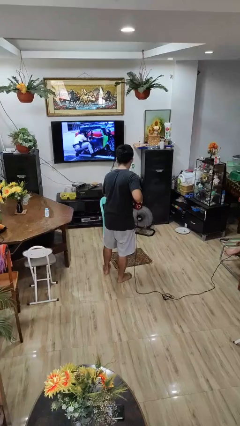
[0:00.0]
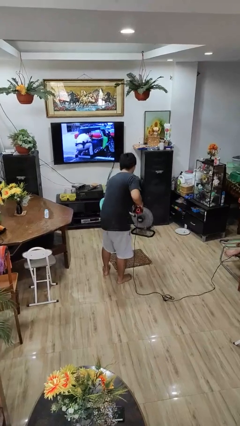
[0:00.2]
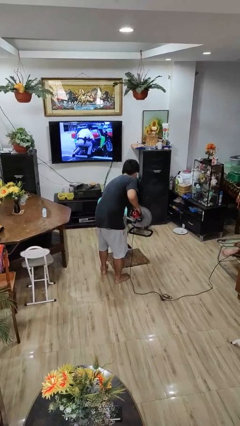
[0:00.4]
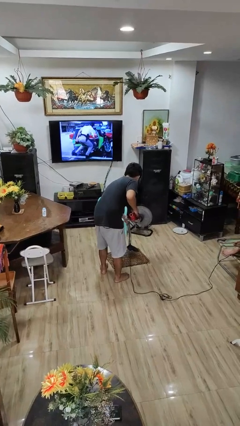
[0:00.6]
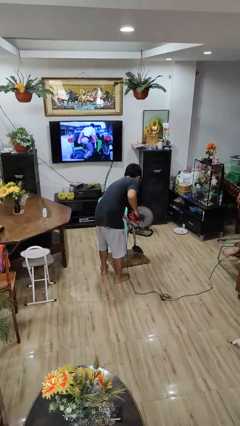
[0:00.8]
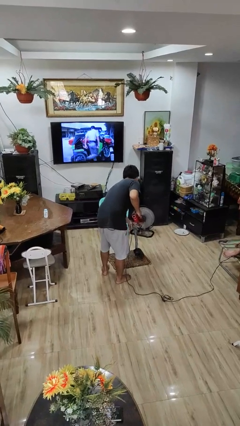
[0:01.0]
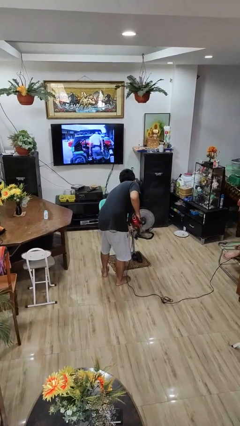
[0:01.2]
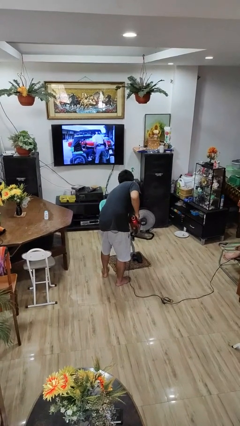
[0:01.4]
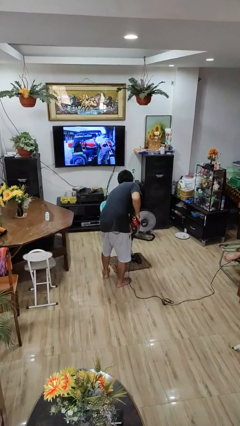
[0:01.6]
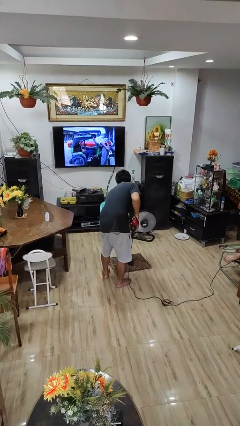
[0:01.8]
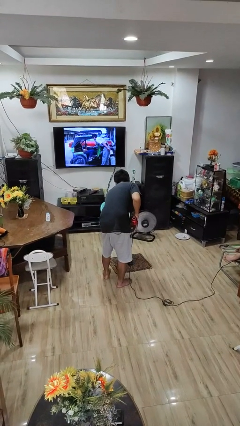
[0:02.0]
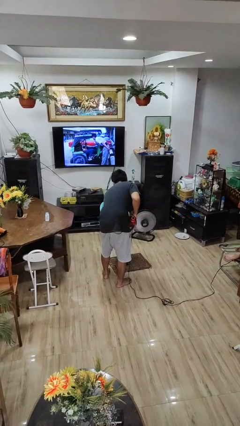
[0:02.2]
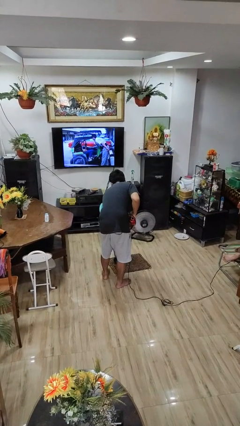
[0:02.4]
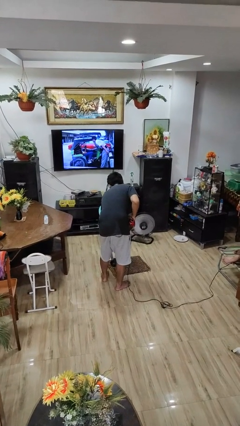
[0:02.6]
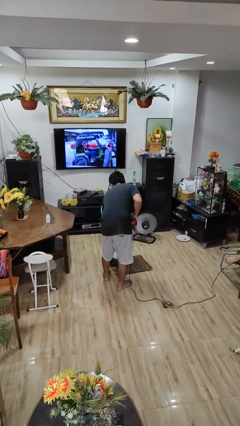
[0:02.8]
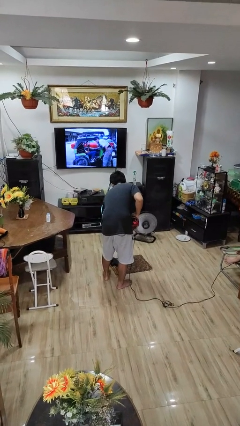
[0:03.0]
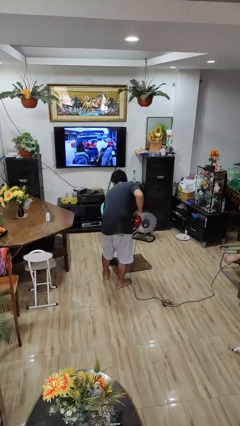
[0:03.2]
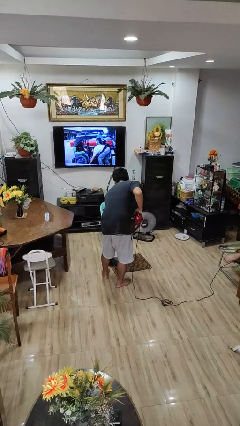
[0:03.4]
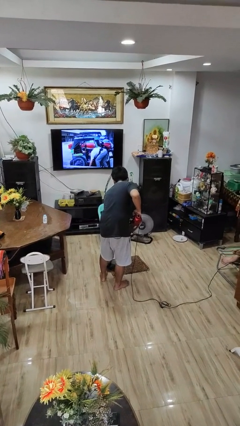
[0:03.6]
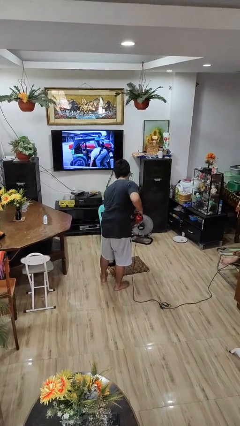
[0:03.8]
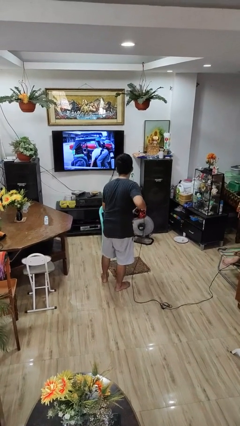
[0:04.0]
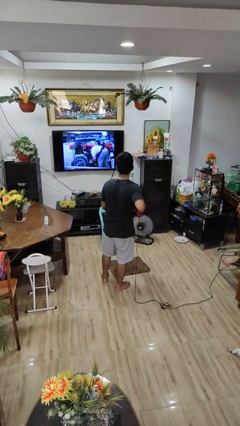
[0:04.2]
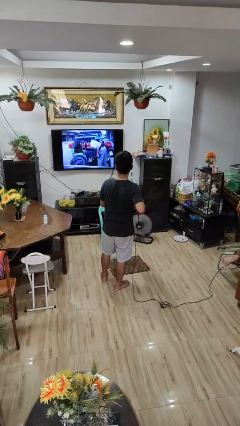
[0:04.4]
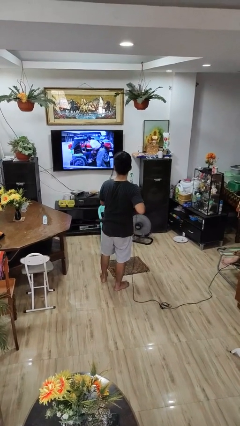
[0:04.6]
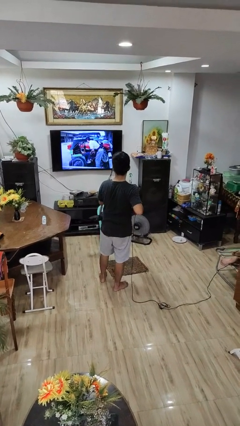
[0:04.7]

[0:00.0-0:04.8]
person vacuums carpet

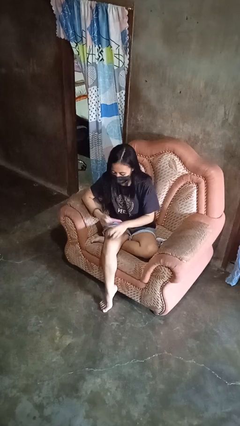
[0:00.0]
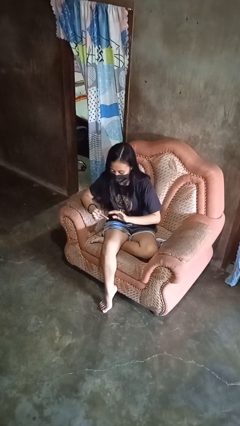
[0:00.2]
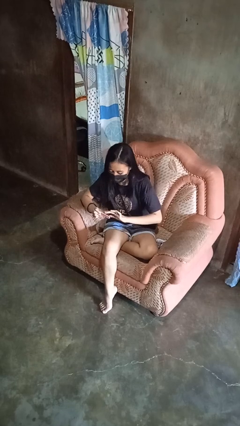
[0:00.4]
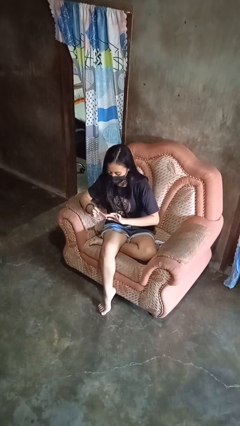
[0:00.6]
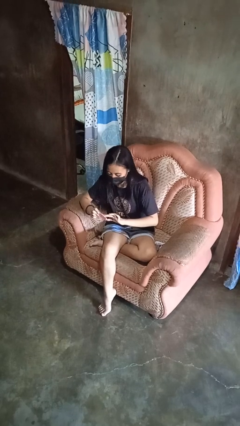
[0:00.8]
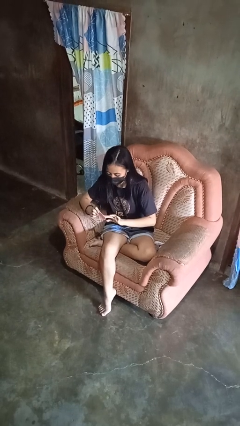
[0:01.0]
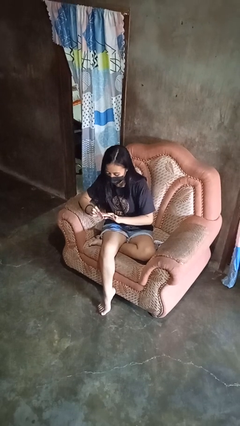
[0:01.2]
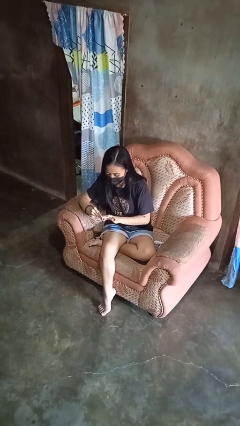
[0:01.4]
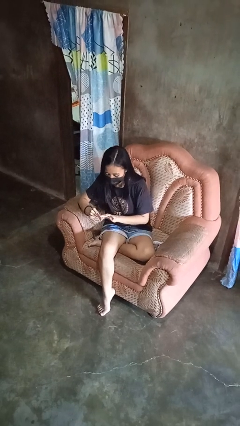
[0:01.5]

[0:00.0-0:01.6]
person files fingernails

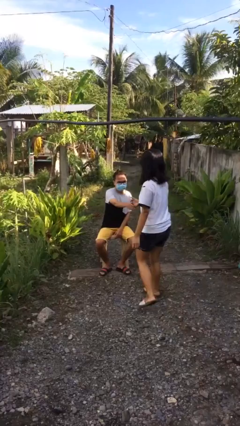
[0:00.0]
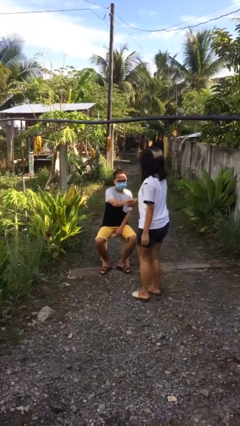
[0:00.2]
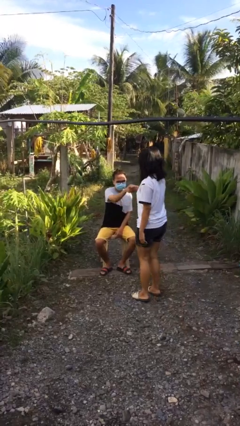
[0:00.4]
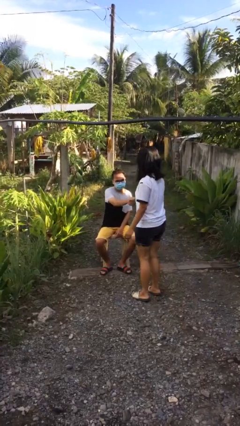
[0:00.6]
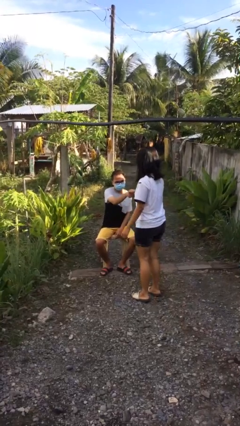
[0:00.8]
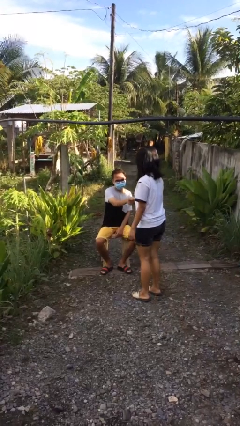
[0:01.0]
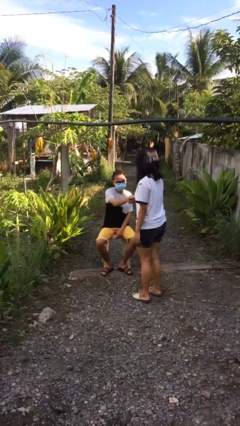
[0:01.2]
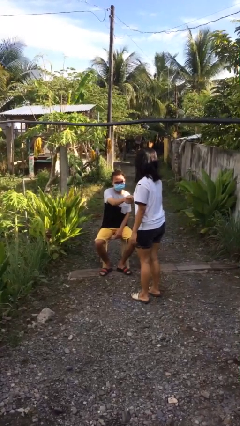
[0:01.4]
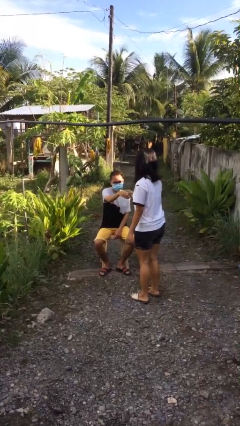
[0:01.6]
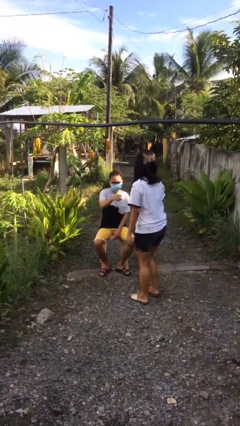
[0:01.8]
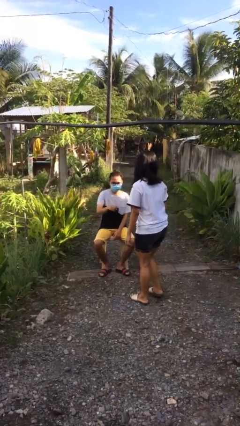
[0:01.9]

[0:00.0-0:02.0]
person shakes hand

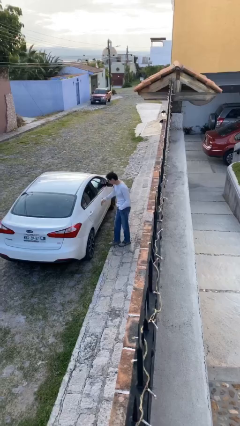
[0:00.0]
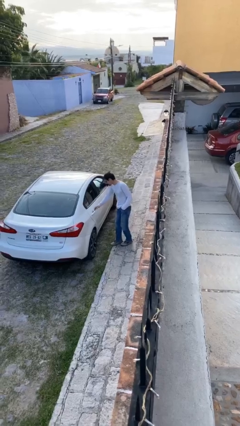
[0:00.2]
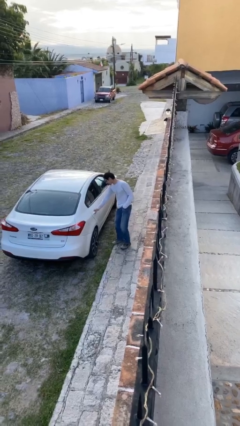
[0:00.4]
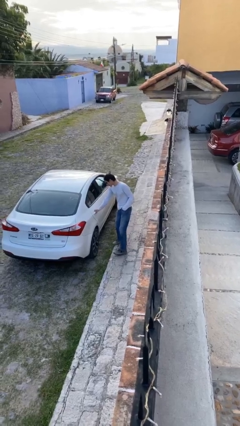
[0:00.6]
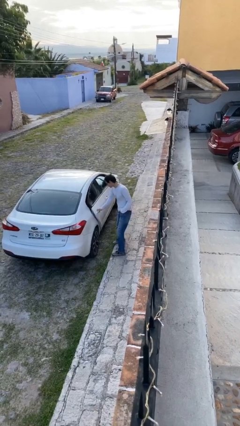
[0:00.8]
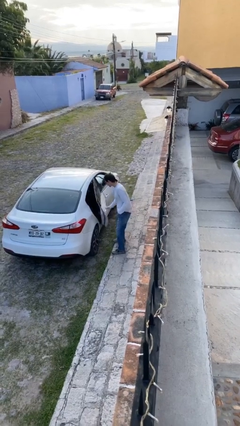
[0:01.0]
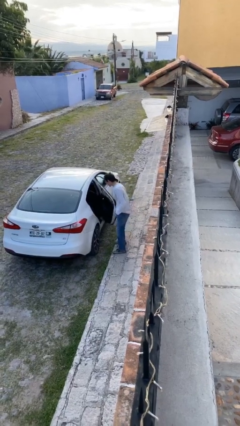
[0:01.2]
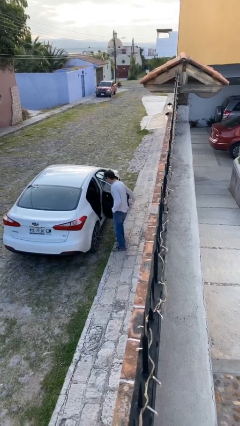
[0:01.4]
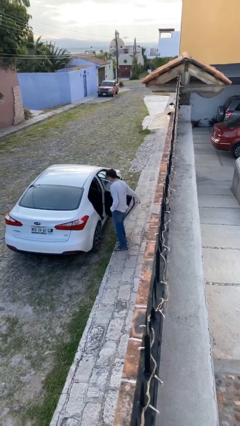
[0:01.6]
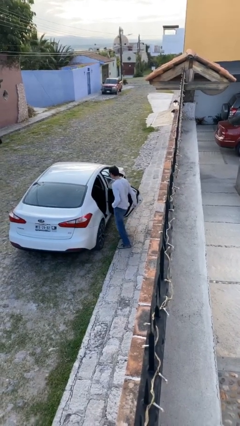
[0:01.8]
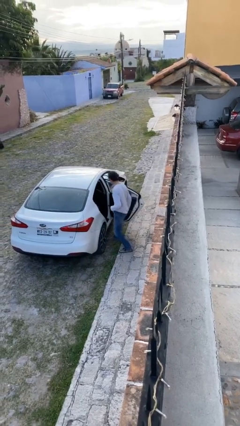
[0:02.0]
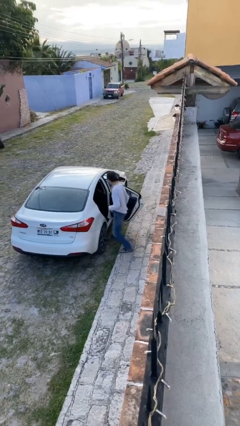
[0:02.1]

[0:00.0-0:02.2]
person opens car door

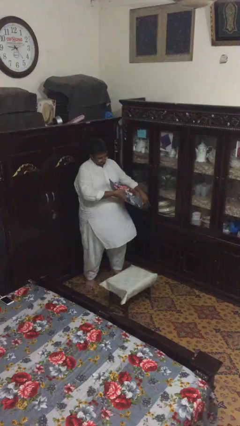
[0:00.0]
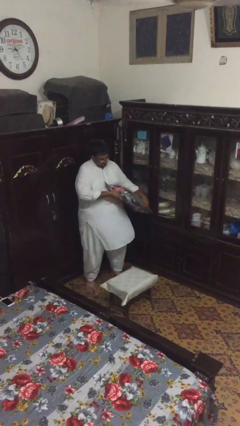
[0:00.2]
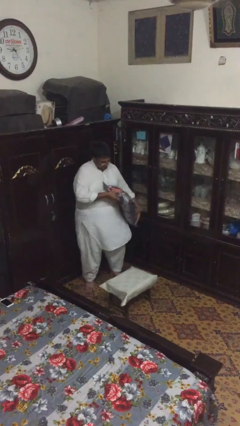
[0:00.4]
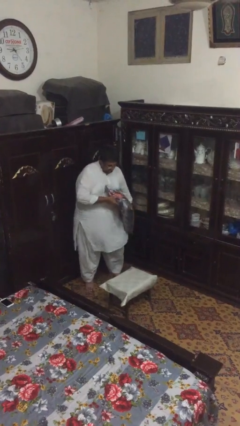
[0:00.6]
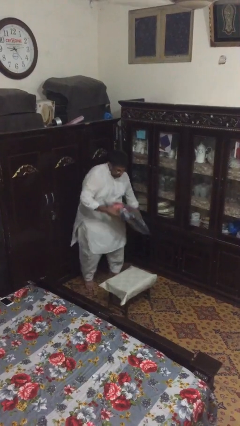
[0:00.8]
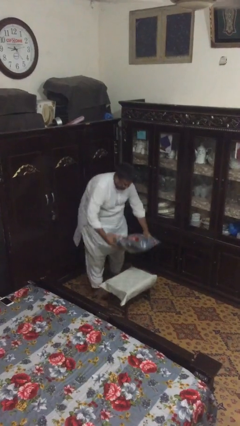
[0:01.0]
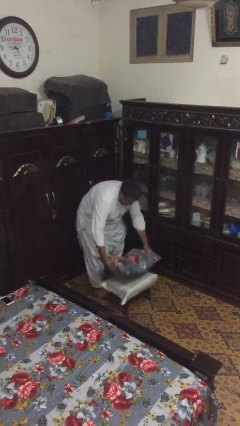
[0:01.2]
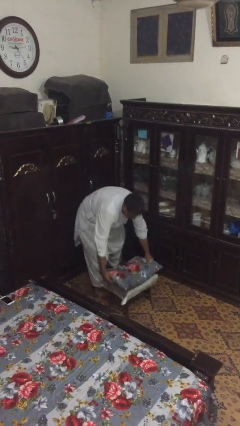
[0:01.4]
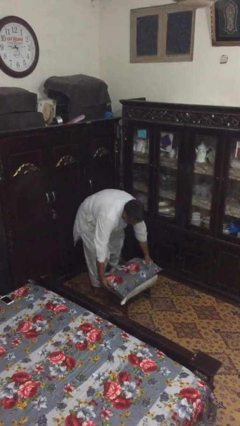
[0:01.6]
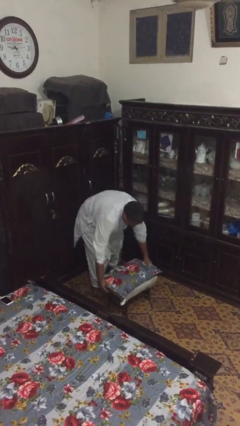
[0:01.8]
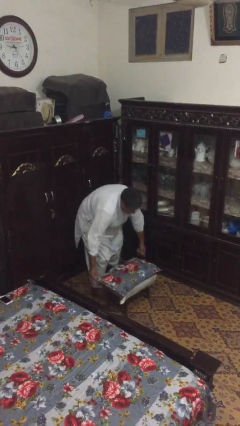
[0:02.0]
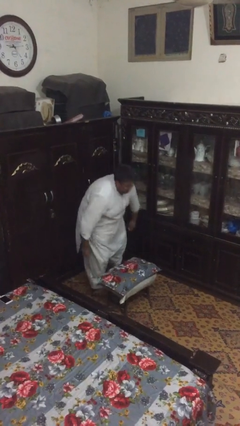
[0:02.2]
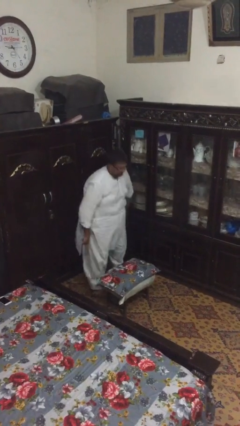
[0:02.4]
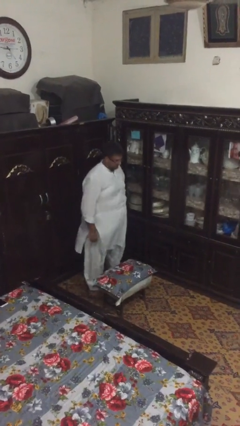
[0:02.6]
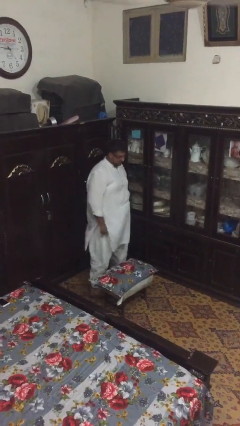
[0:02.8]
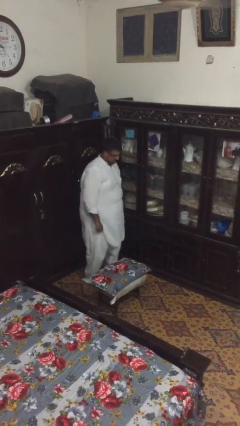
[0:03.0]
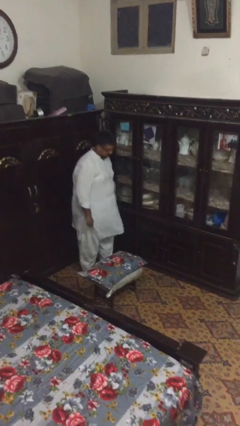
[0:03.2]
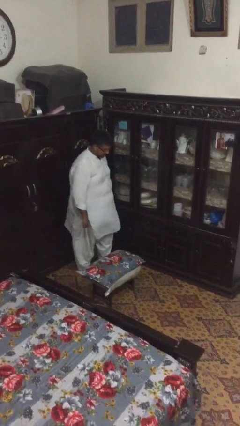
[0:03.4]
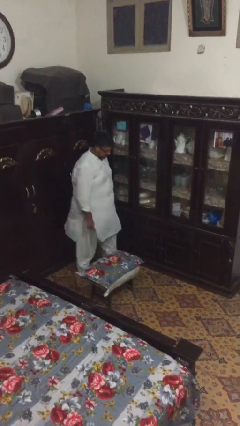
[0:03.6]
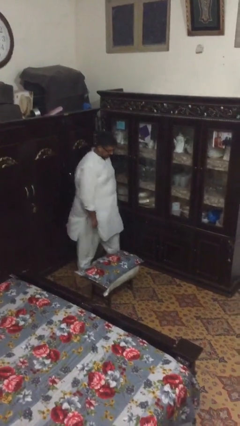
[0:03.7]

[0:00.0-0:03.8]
person puts down object on table

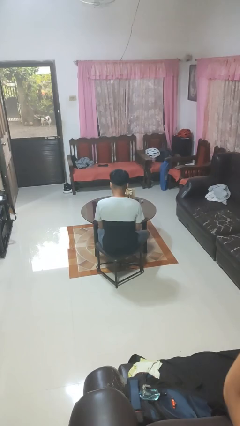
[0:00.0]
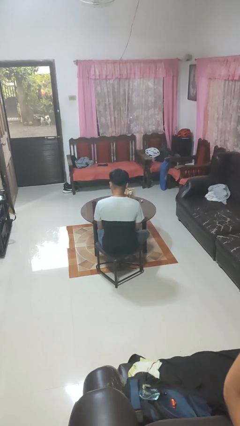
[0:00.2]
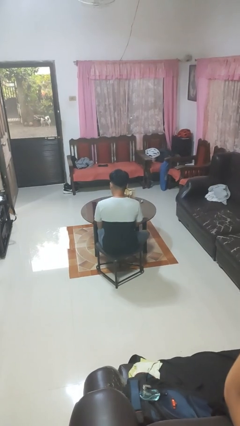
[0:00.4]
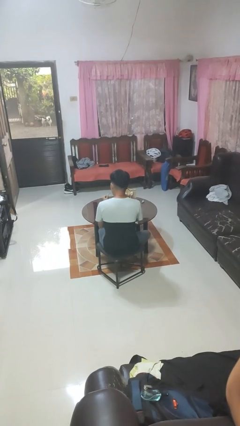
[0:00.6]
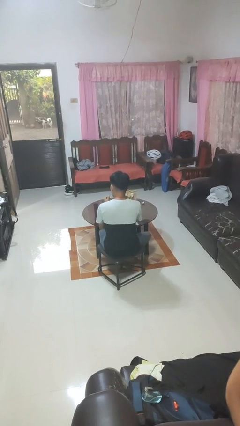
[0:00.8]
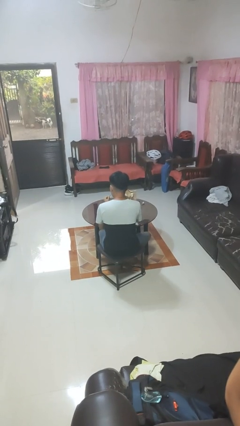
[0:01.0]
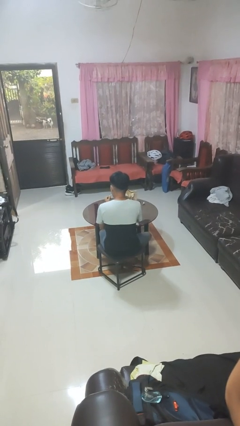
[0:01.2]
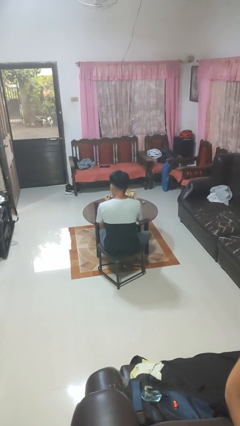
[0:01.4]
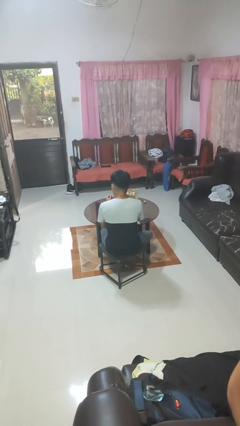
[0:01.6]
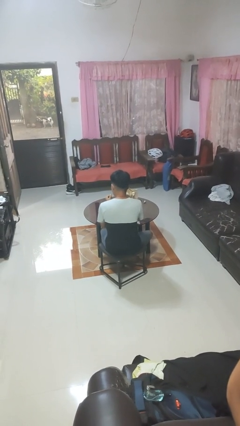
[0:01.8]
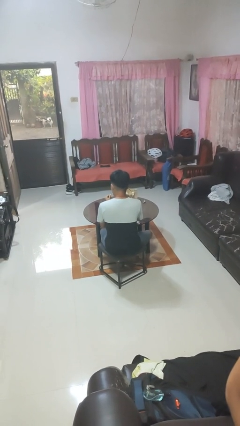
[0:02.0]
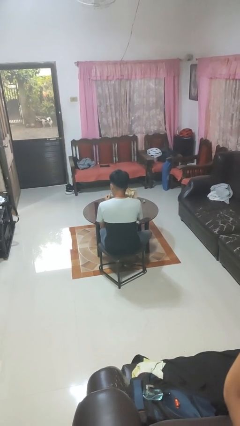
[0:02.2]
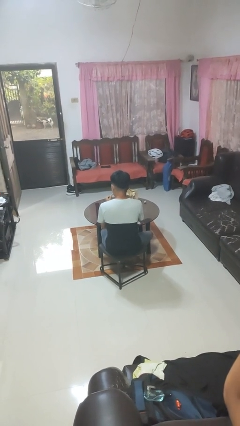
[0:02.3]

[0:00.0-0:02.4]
person paints fingernails

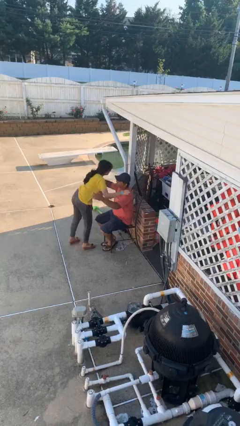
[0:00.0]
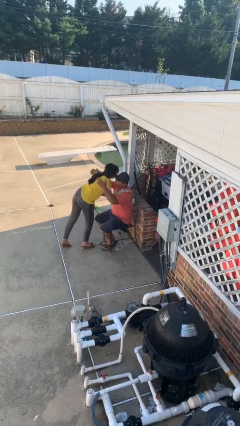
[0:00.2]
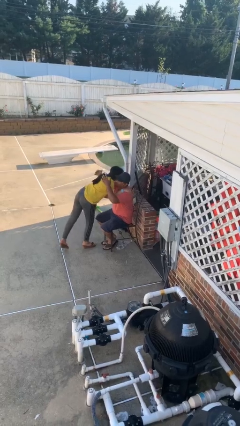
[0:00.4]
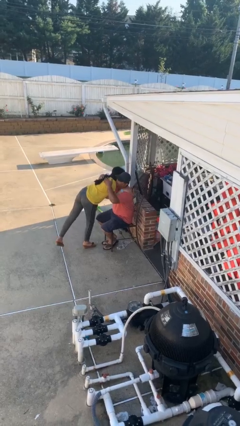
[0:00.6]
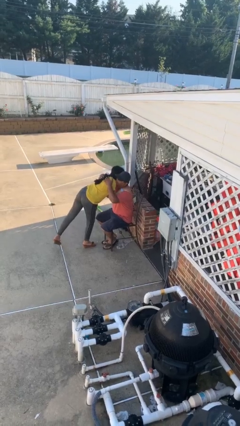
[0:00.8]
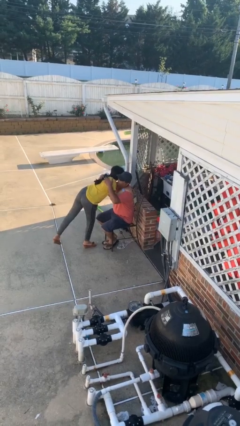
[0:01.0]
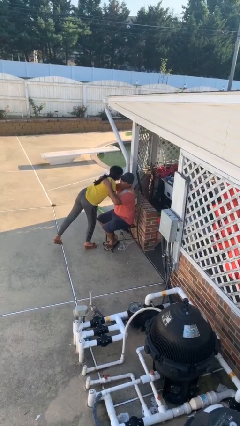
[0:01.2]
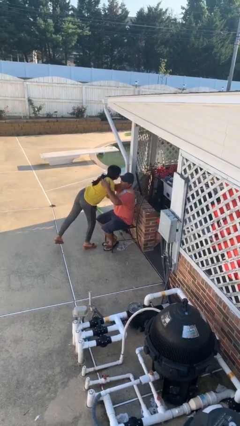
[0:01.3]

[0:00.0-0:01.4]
person embraces person
